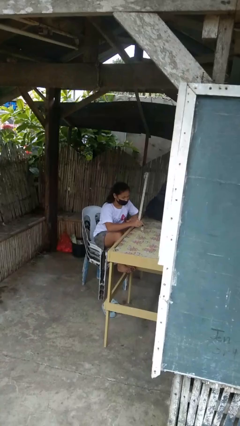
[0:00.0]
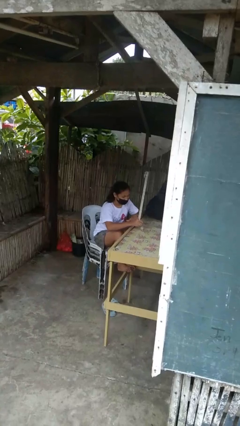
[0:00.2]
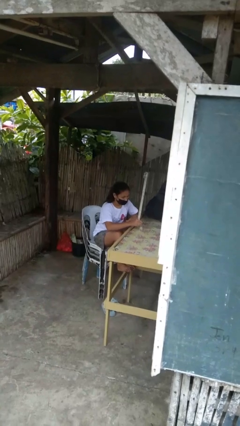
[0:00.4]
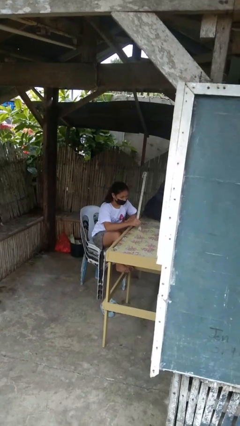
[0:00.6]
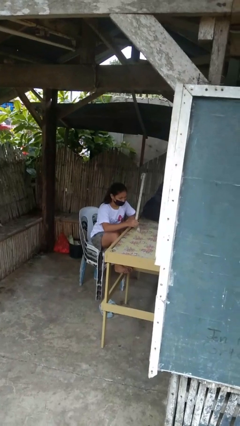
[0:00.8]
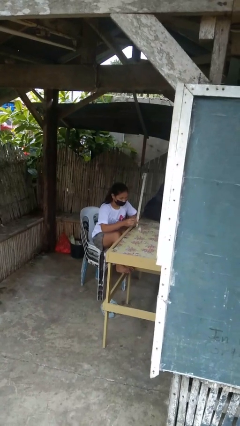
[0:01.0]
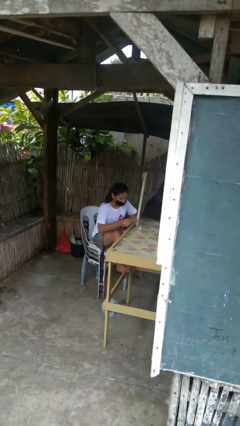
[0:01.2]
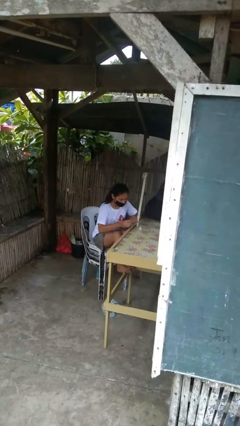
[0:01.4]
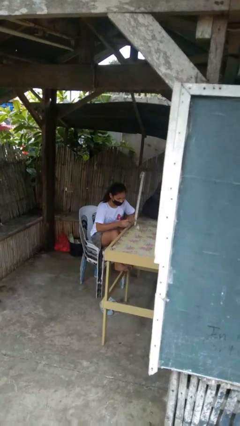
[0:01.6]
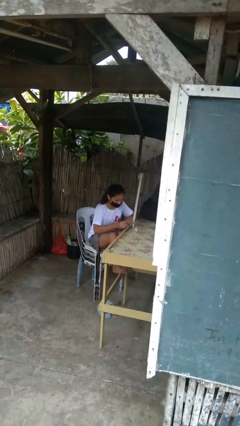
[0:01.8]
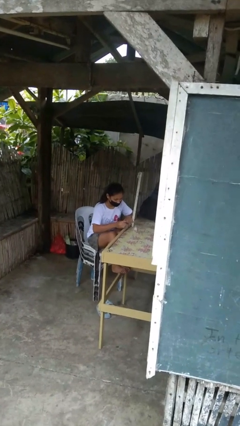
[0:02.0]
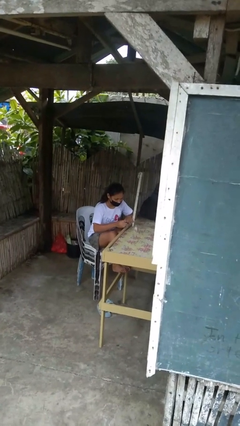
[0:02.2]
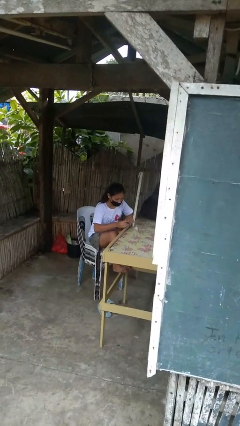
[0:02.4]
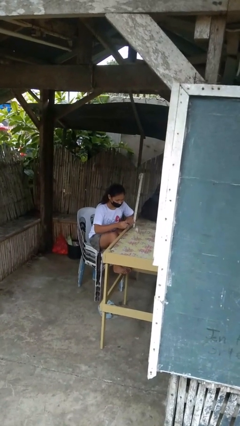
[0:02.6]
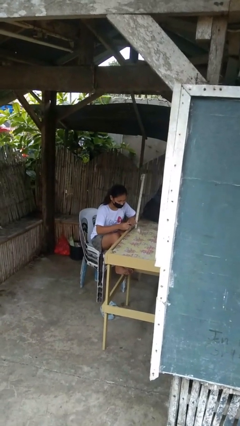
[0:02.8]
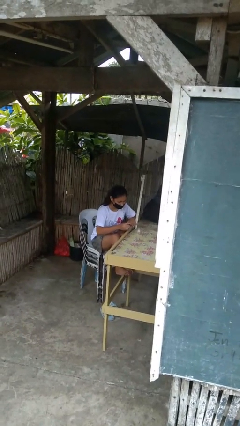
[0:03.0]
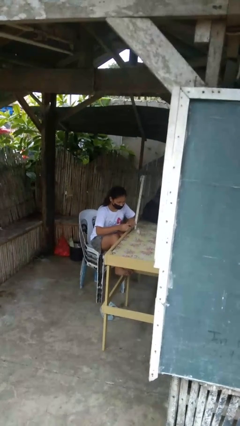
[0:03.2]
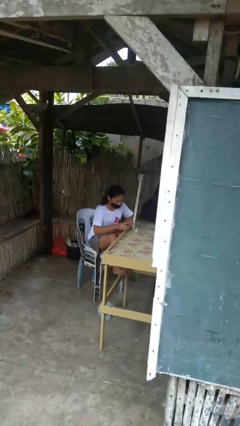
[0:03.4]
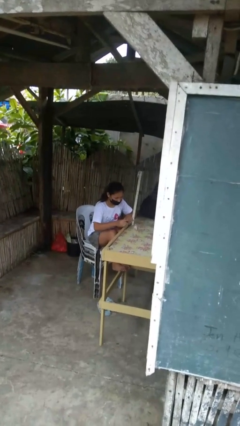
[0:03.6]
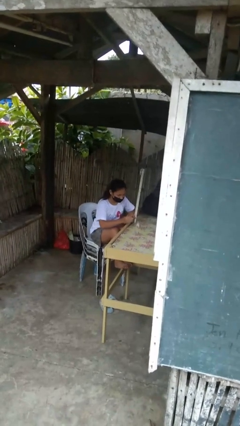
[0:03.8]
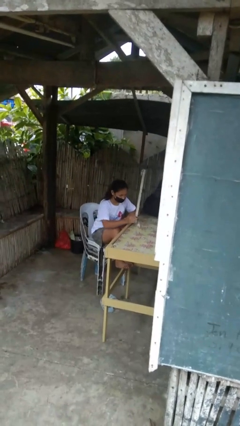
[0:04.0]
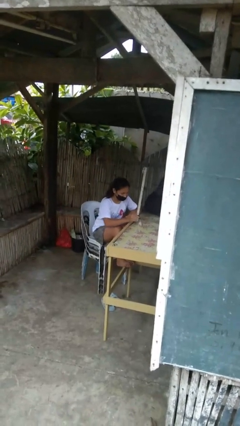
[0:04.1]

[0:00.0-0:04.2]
person paints fingernails

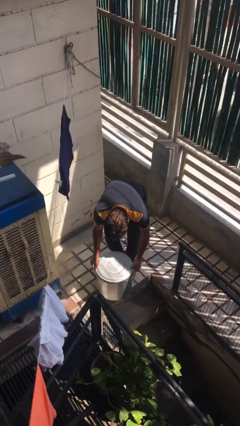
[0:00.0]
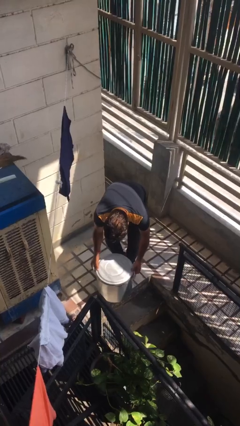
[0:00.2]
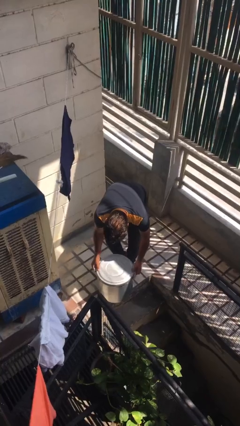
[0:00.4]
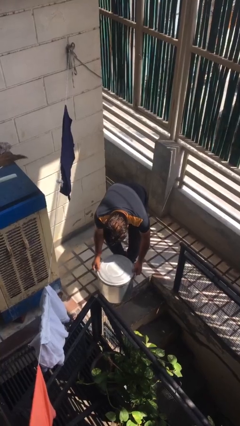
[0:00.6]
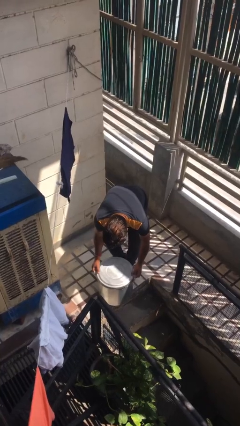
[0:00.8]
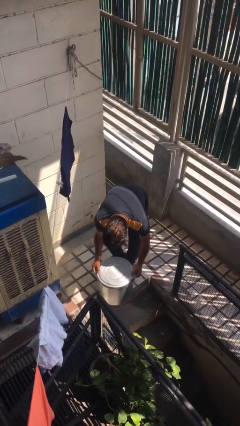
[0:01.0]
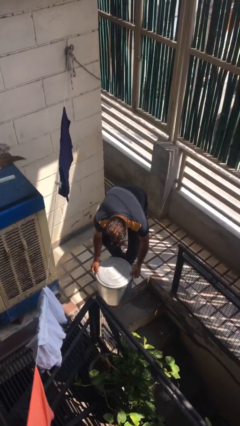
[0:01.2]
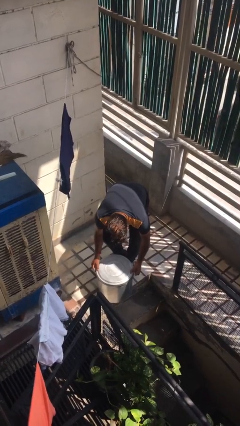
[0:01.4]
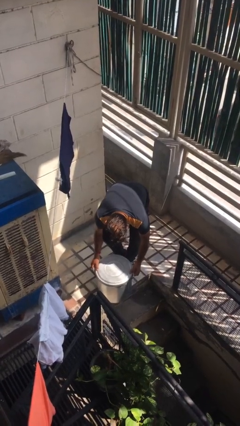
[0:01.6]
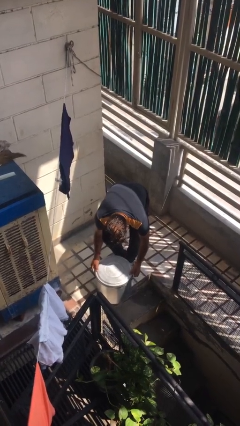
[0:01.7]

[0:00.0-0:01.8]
person puts down object on floor

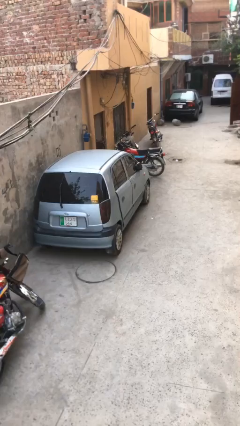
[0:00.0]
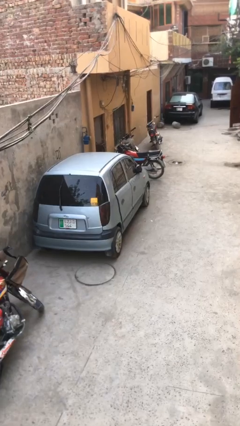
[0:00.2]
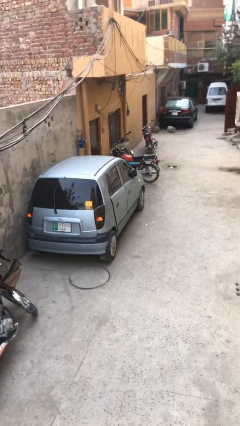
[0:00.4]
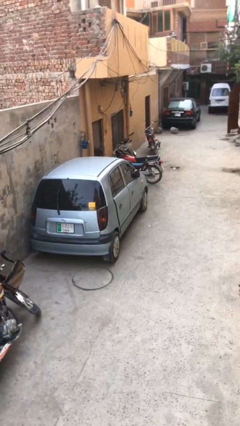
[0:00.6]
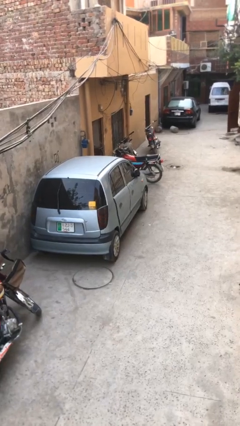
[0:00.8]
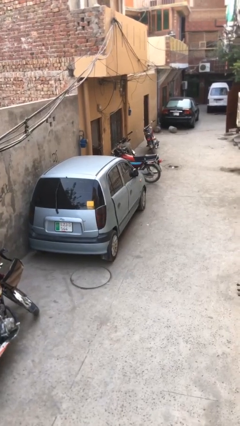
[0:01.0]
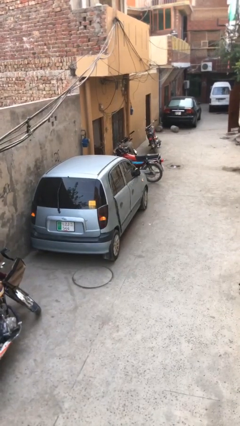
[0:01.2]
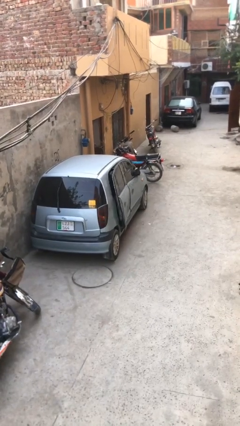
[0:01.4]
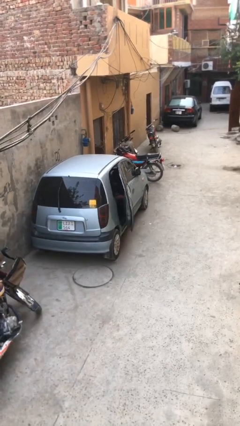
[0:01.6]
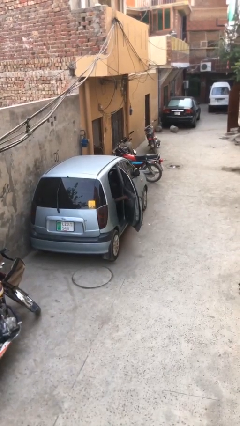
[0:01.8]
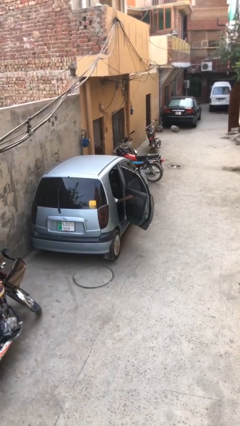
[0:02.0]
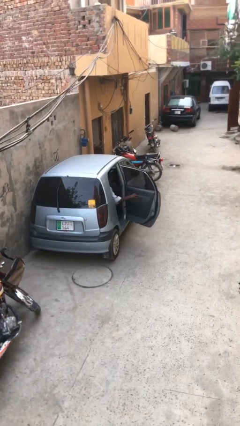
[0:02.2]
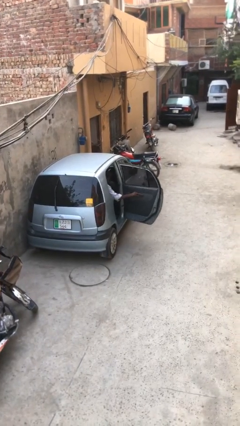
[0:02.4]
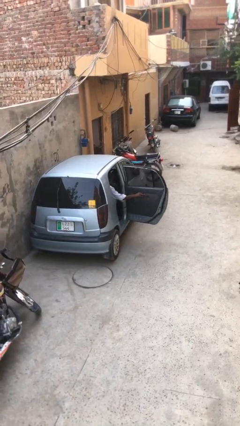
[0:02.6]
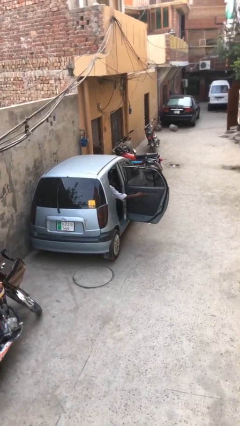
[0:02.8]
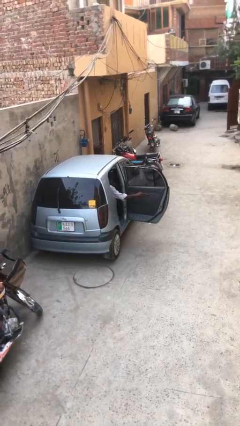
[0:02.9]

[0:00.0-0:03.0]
person opens car door

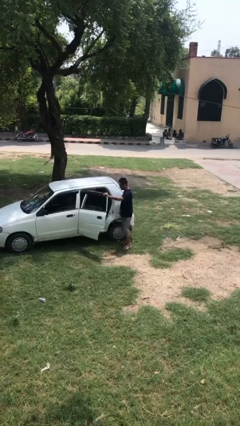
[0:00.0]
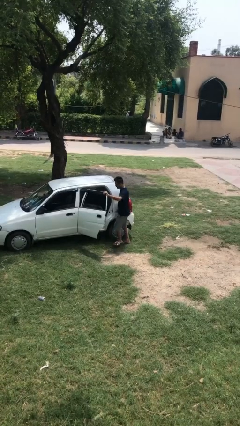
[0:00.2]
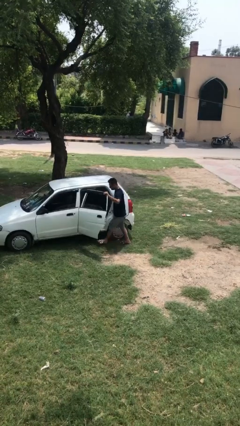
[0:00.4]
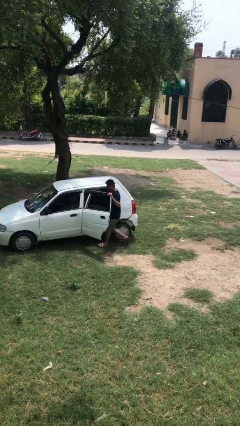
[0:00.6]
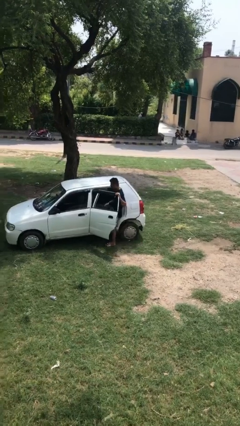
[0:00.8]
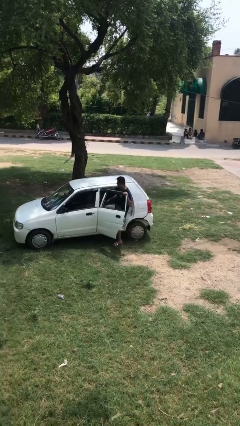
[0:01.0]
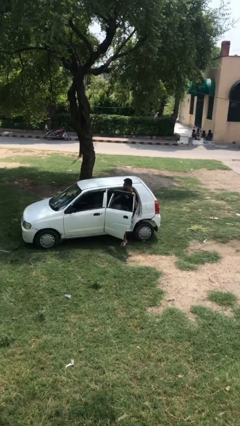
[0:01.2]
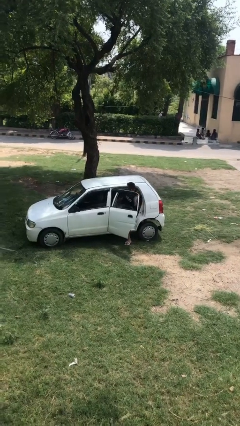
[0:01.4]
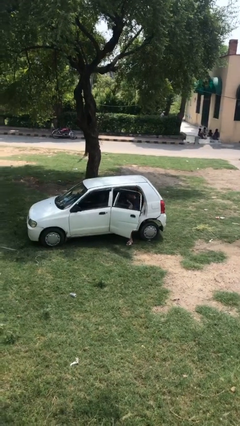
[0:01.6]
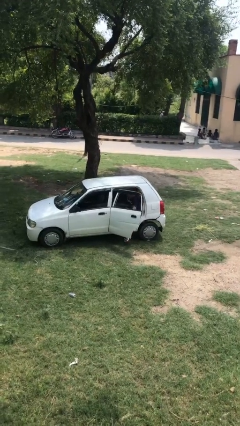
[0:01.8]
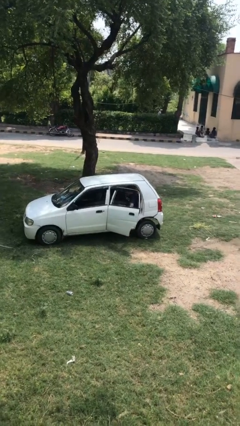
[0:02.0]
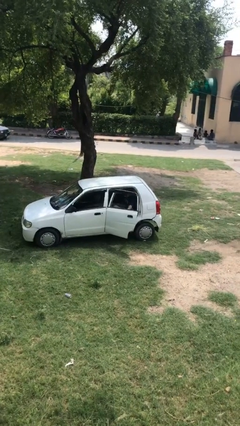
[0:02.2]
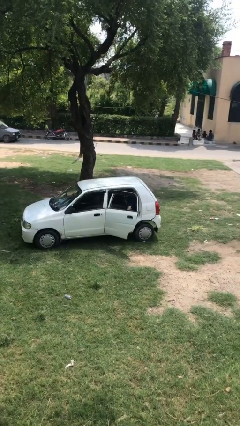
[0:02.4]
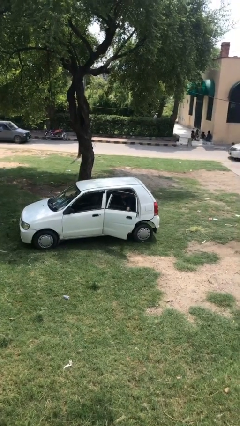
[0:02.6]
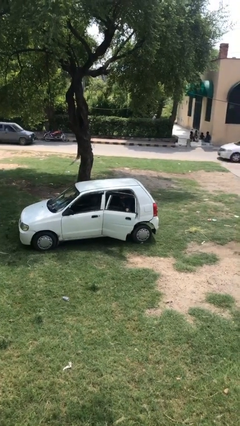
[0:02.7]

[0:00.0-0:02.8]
person enters car

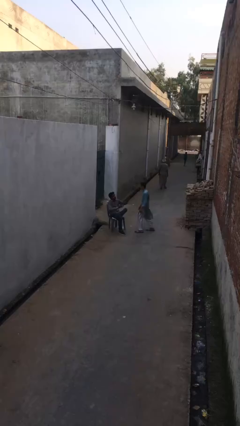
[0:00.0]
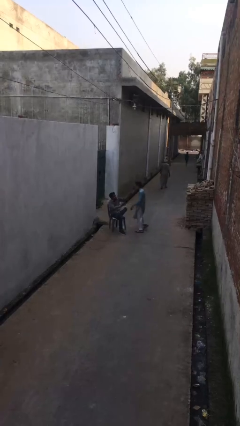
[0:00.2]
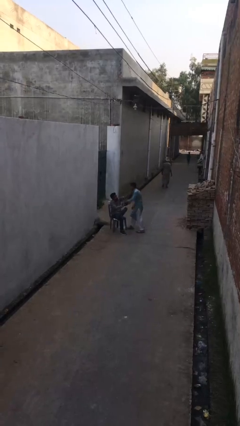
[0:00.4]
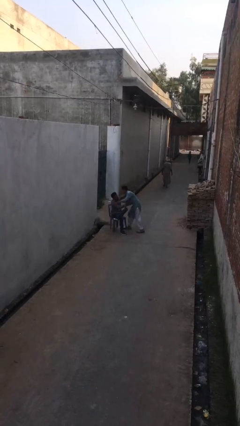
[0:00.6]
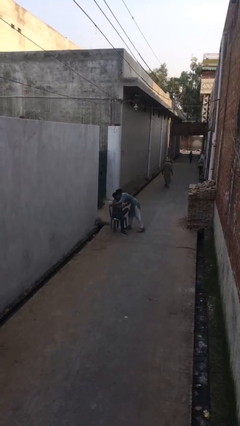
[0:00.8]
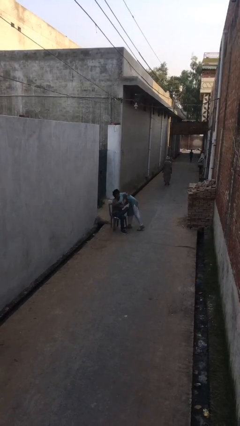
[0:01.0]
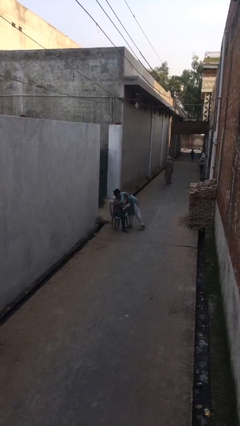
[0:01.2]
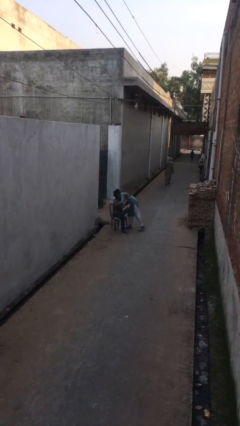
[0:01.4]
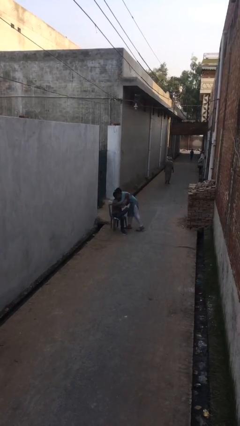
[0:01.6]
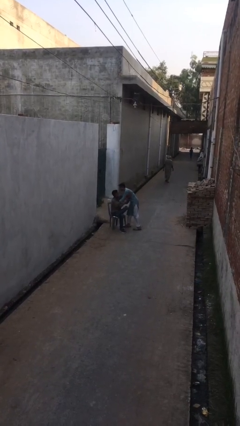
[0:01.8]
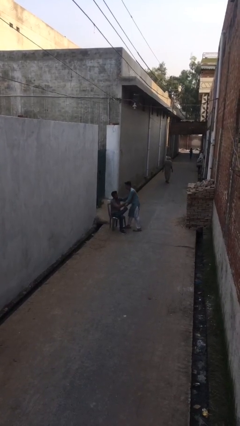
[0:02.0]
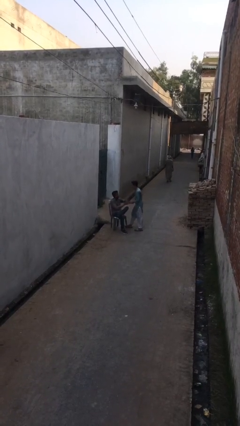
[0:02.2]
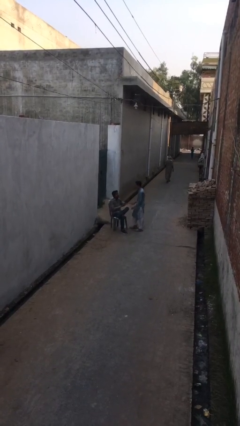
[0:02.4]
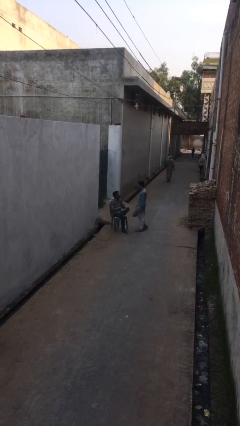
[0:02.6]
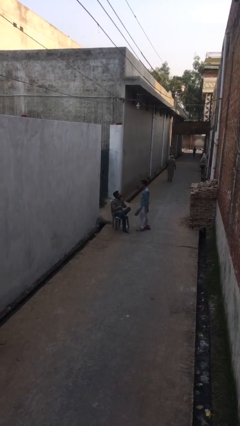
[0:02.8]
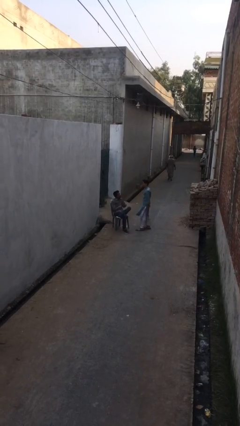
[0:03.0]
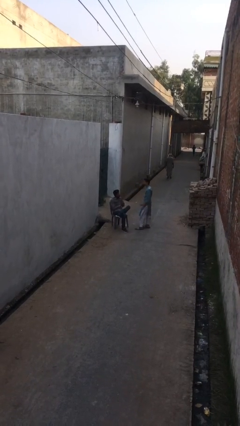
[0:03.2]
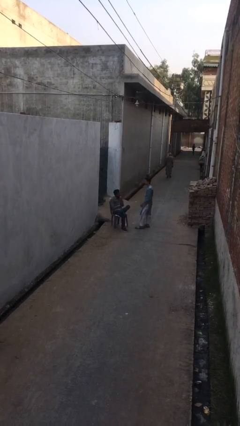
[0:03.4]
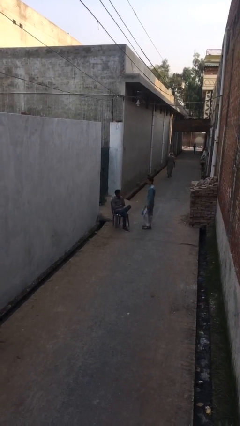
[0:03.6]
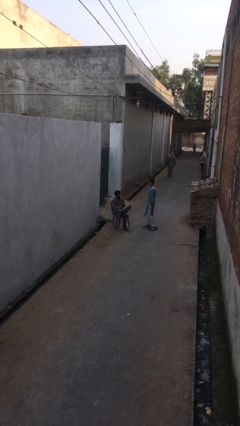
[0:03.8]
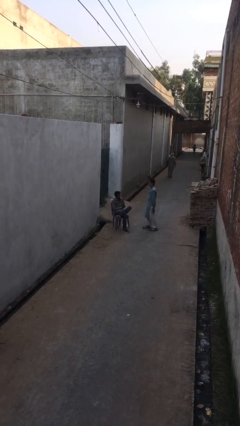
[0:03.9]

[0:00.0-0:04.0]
person embraces person

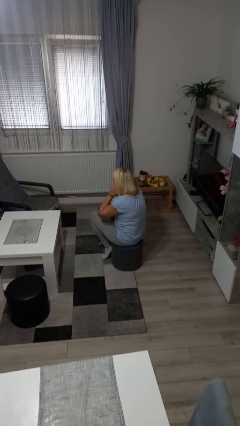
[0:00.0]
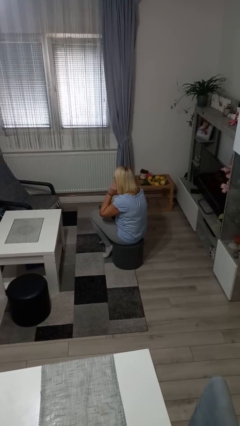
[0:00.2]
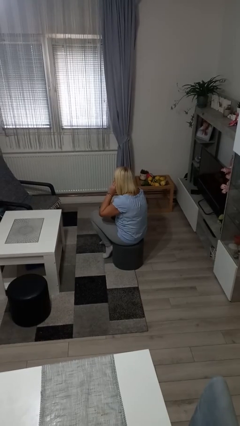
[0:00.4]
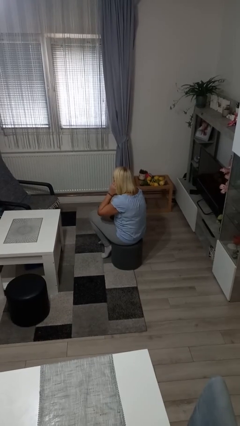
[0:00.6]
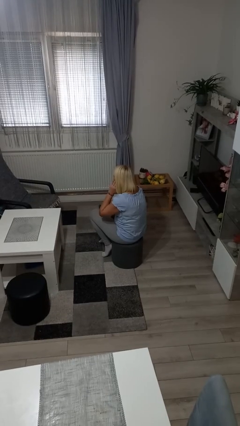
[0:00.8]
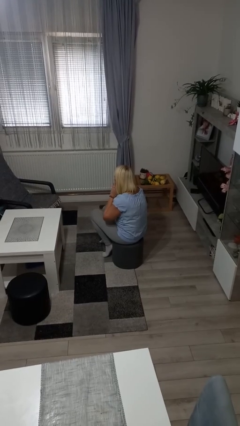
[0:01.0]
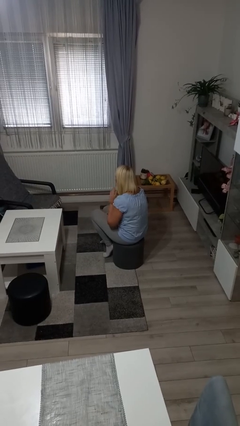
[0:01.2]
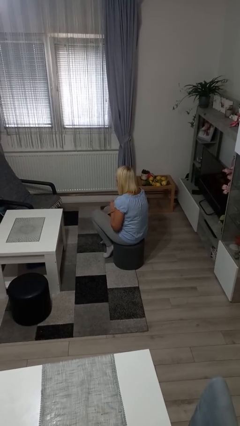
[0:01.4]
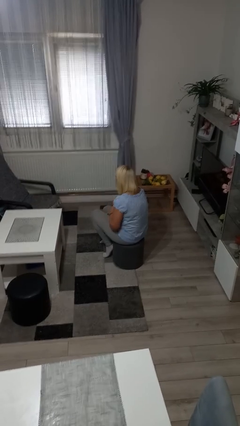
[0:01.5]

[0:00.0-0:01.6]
person touches earlobe
